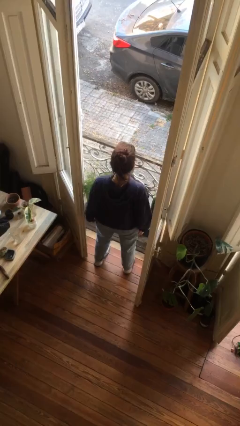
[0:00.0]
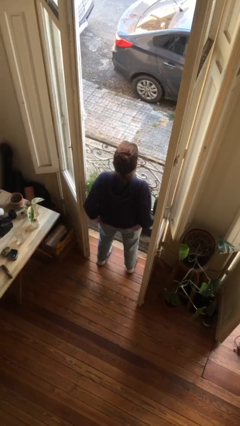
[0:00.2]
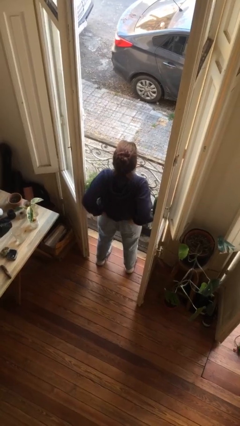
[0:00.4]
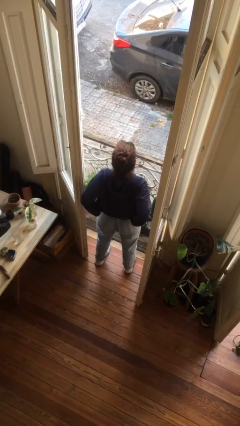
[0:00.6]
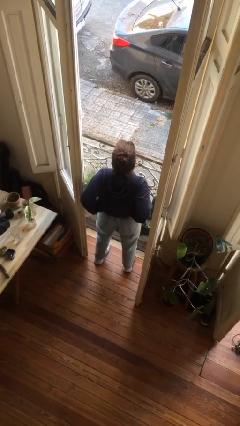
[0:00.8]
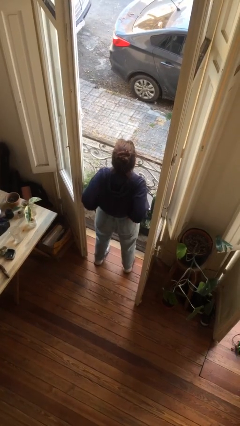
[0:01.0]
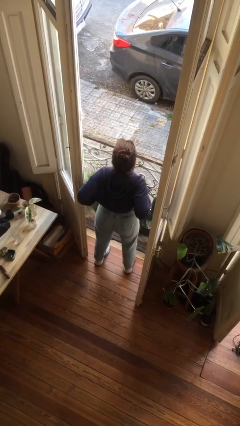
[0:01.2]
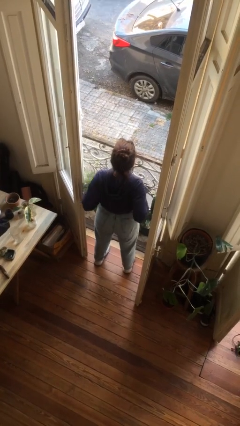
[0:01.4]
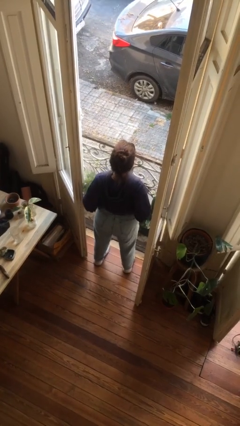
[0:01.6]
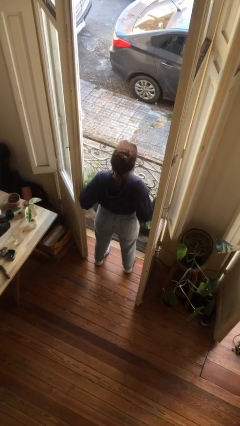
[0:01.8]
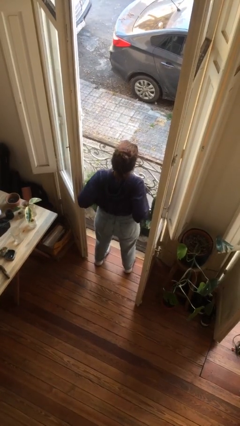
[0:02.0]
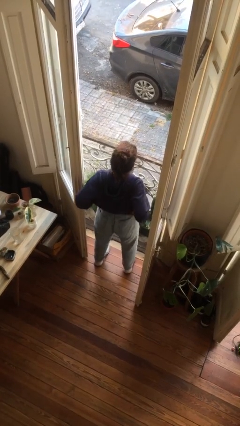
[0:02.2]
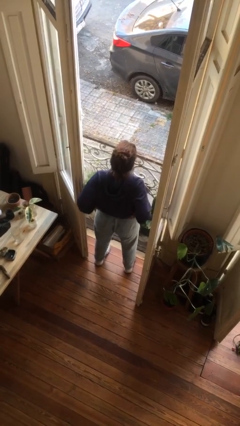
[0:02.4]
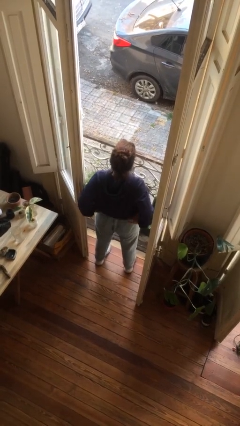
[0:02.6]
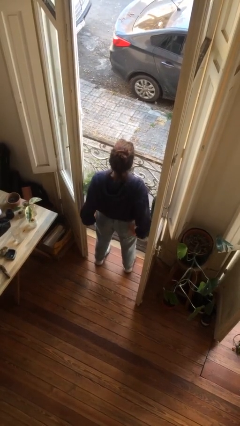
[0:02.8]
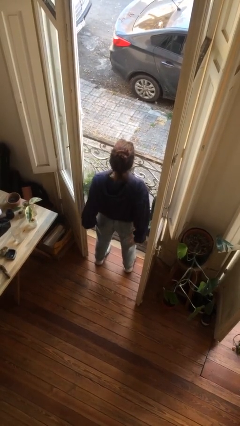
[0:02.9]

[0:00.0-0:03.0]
person hikes up pants

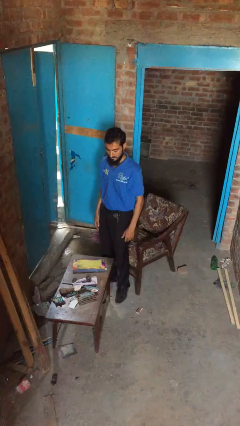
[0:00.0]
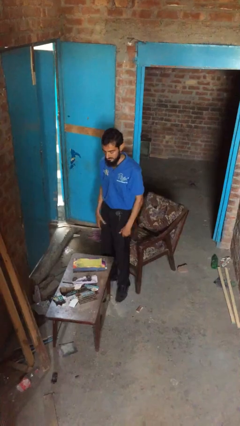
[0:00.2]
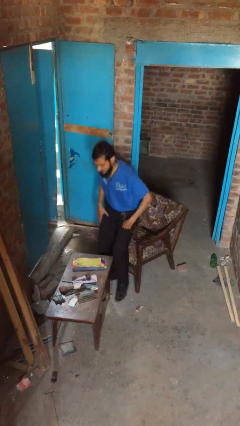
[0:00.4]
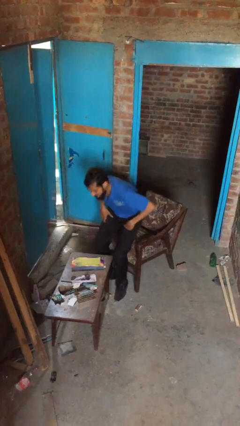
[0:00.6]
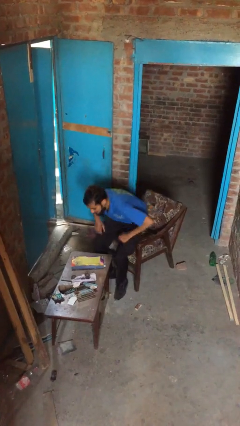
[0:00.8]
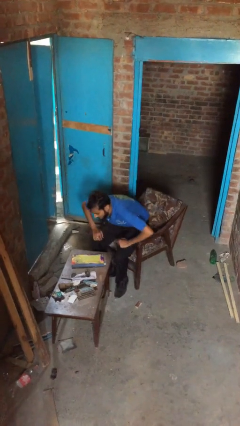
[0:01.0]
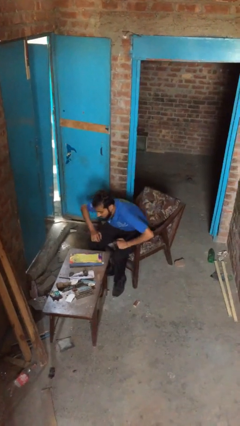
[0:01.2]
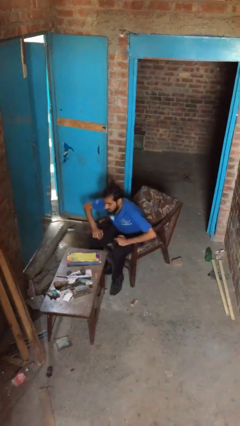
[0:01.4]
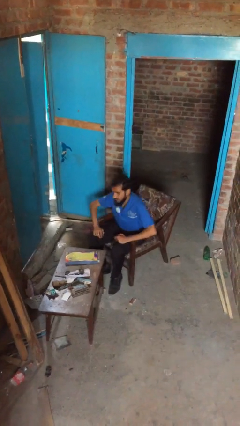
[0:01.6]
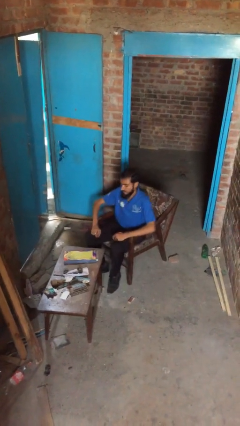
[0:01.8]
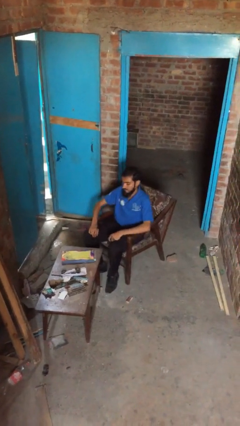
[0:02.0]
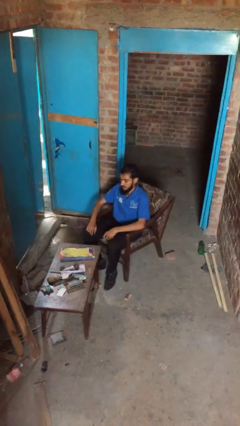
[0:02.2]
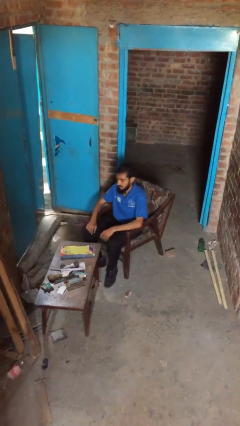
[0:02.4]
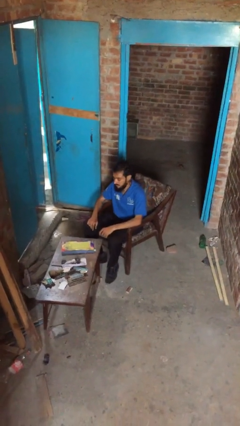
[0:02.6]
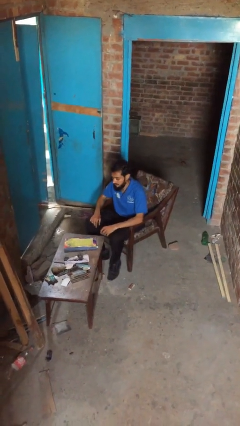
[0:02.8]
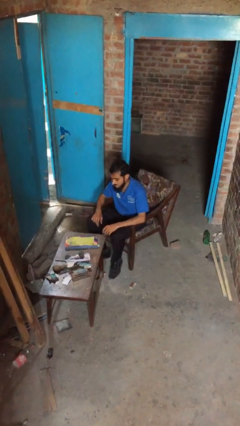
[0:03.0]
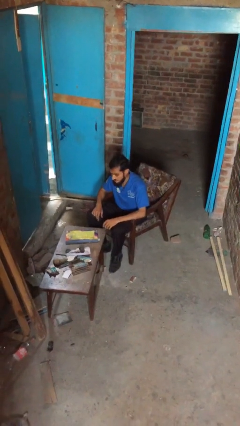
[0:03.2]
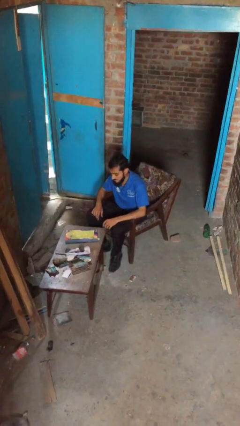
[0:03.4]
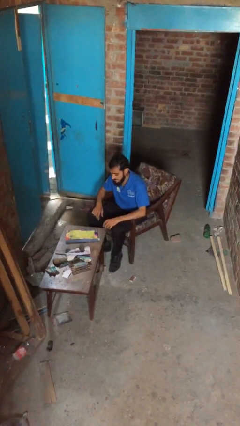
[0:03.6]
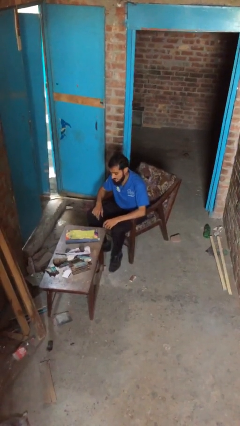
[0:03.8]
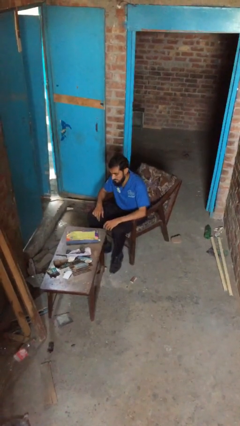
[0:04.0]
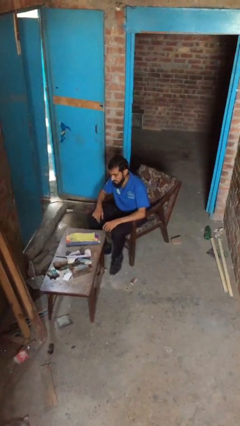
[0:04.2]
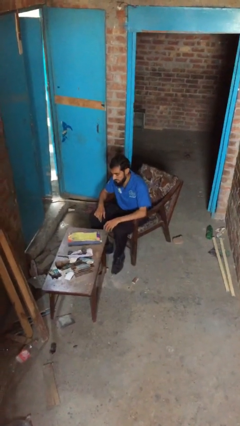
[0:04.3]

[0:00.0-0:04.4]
person sits down

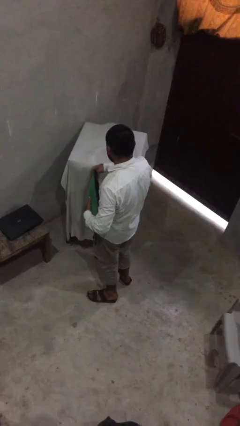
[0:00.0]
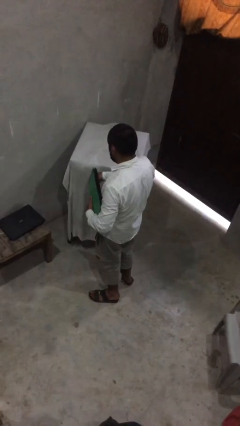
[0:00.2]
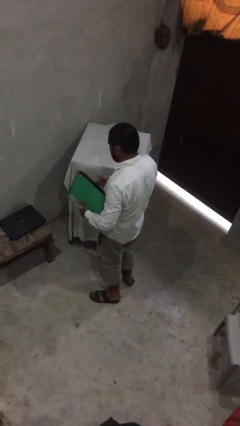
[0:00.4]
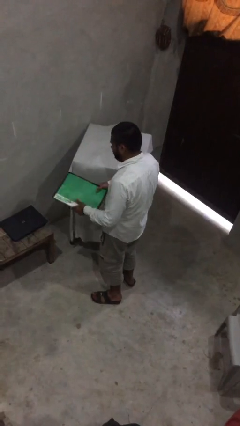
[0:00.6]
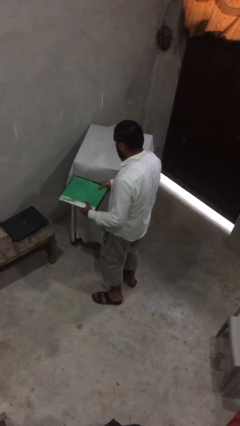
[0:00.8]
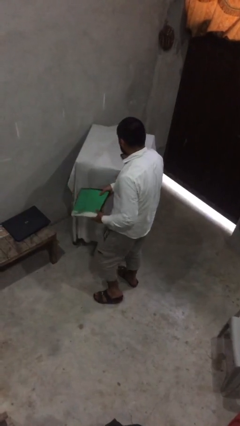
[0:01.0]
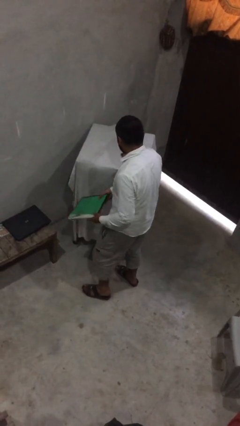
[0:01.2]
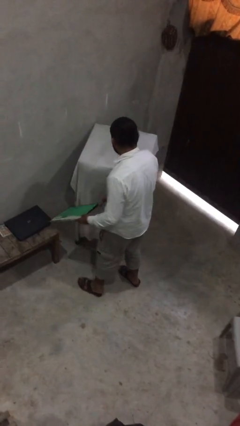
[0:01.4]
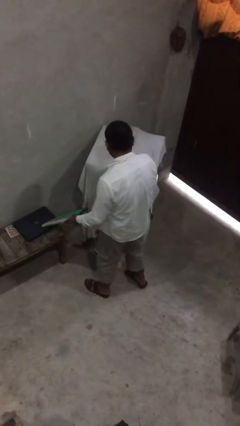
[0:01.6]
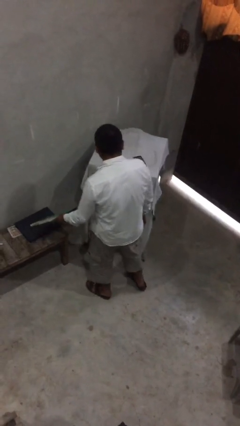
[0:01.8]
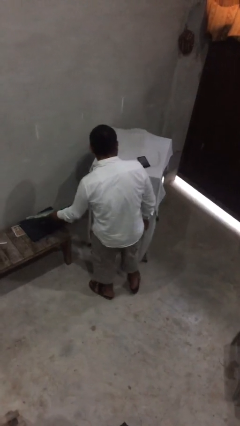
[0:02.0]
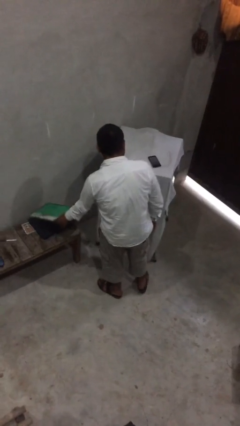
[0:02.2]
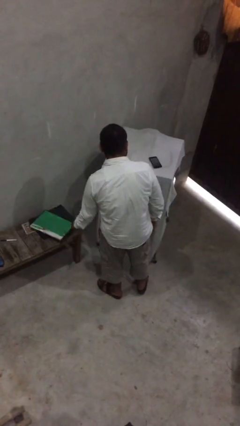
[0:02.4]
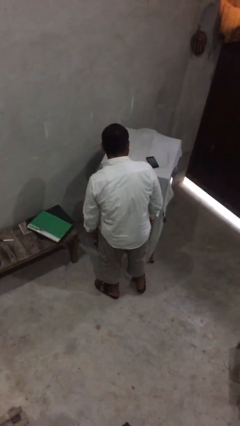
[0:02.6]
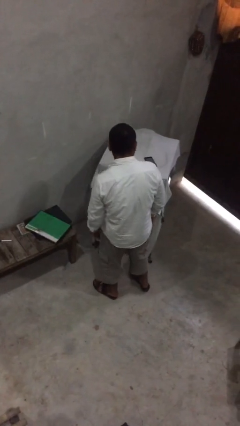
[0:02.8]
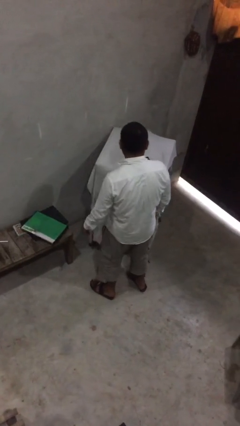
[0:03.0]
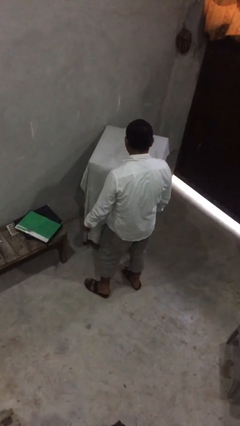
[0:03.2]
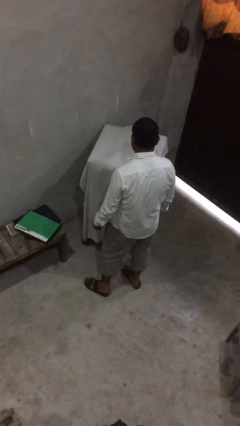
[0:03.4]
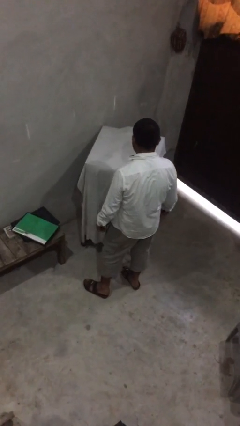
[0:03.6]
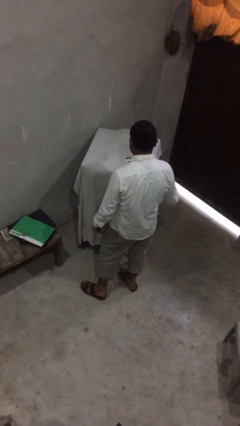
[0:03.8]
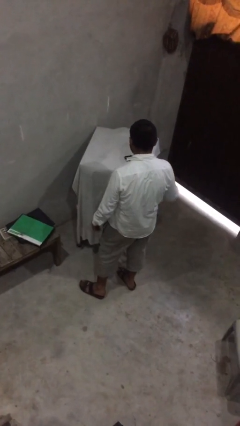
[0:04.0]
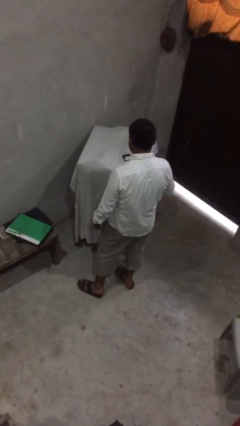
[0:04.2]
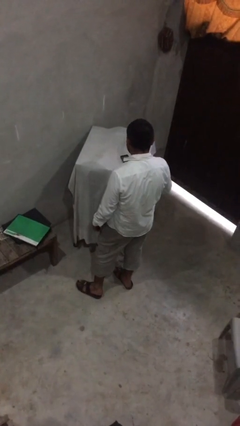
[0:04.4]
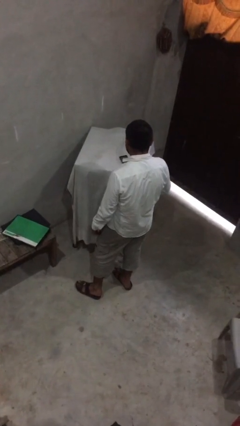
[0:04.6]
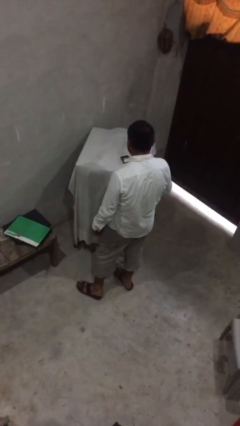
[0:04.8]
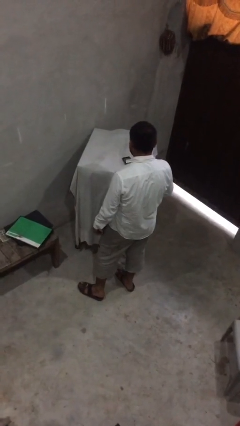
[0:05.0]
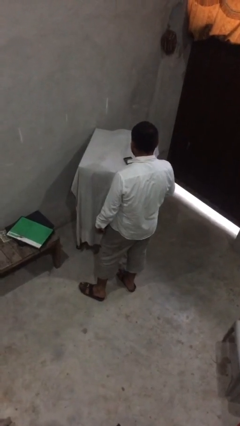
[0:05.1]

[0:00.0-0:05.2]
person puts down object on table

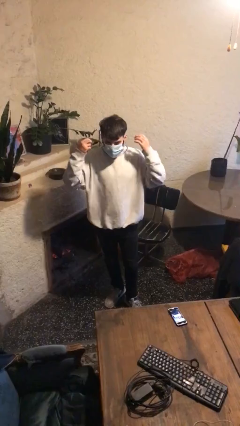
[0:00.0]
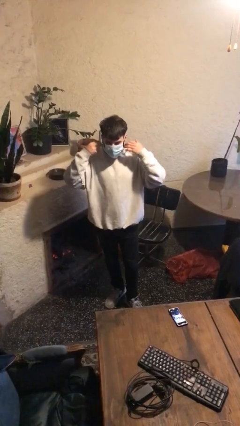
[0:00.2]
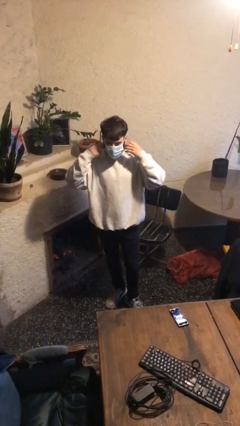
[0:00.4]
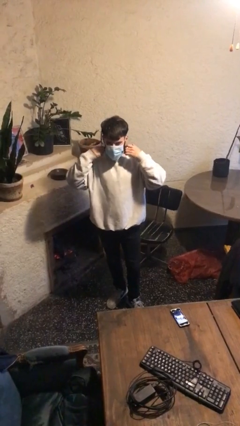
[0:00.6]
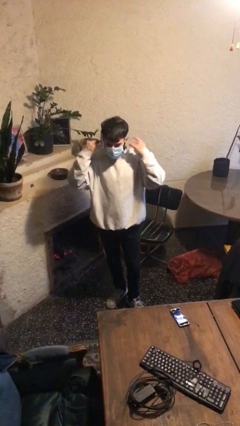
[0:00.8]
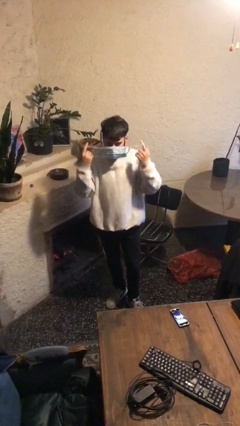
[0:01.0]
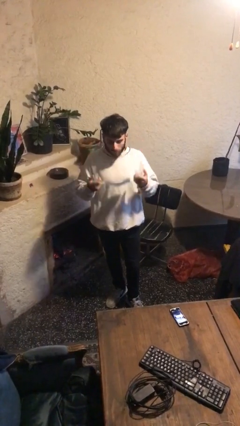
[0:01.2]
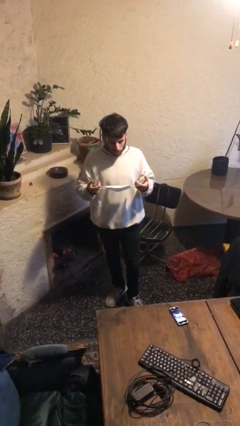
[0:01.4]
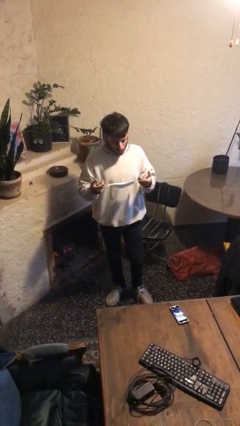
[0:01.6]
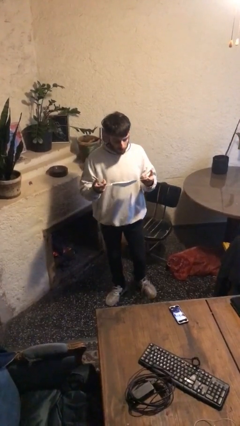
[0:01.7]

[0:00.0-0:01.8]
person takes off facemask

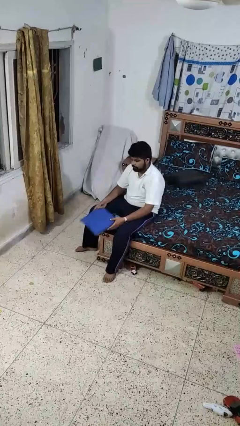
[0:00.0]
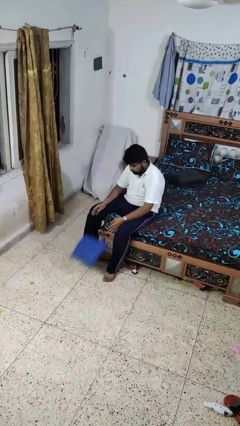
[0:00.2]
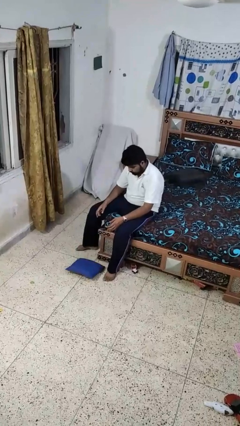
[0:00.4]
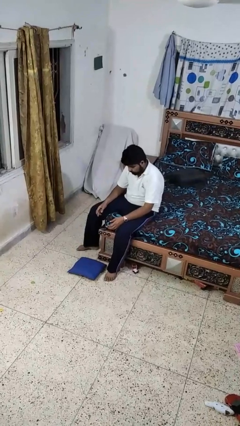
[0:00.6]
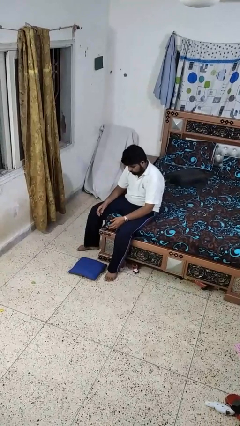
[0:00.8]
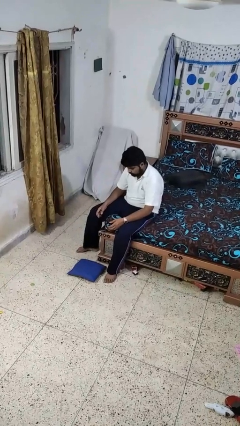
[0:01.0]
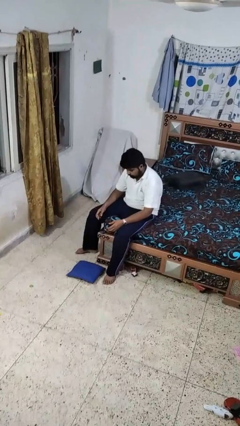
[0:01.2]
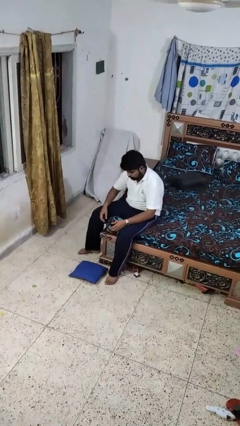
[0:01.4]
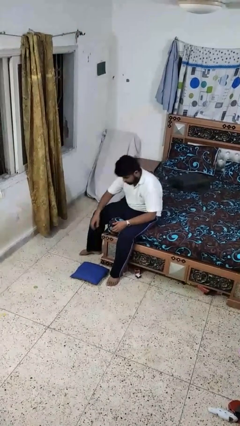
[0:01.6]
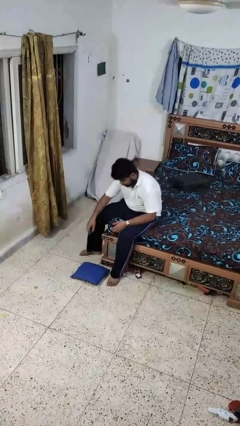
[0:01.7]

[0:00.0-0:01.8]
person drops object

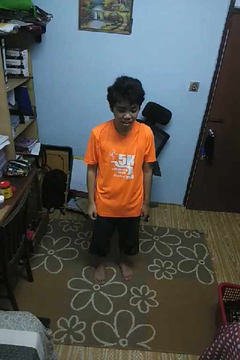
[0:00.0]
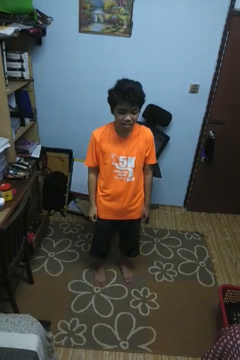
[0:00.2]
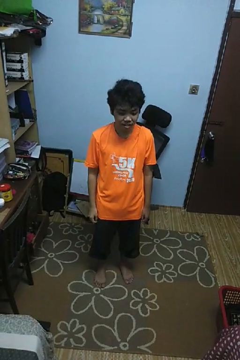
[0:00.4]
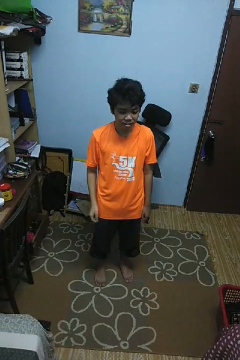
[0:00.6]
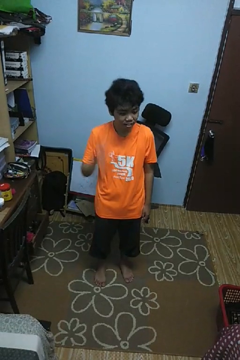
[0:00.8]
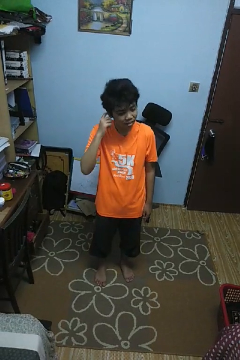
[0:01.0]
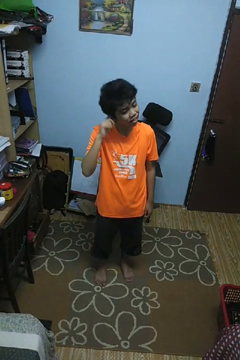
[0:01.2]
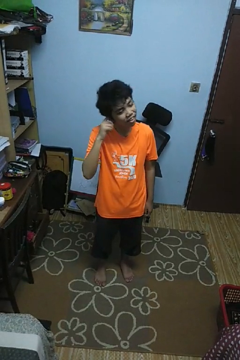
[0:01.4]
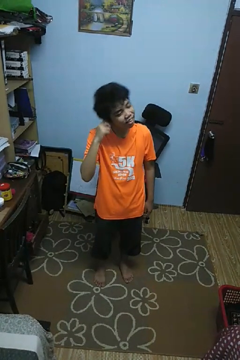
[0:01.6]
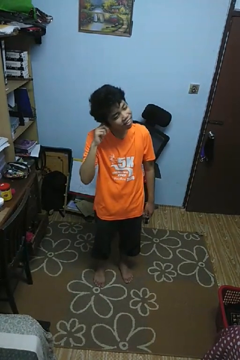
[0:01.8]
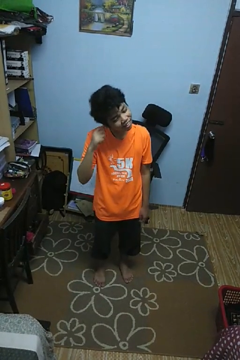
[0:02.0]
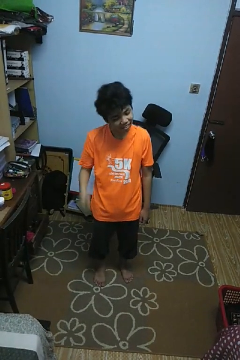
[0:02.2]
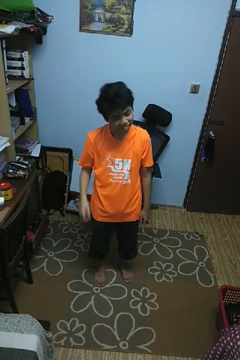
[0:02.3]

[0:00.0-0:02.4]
person puts fingers in ear
